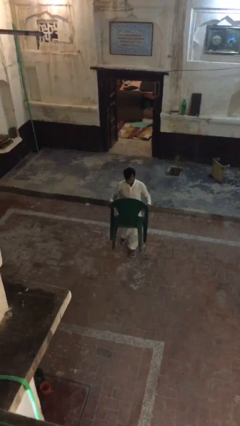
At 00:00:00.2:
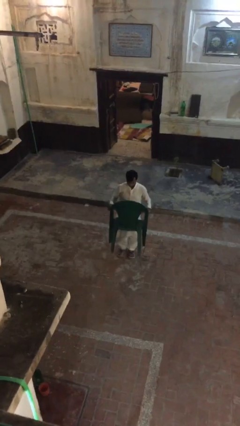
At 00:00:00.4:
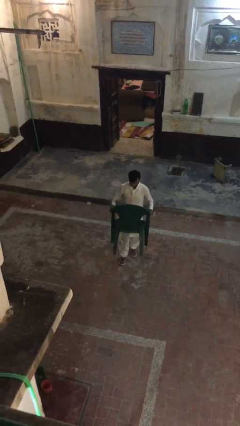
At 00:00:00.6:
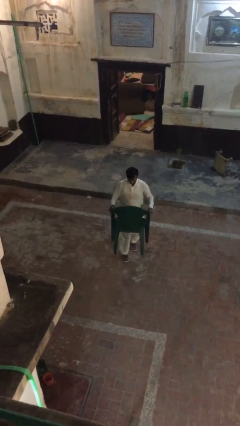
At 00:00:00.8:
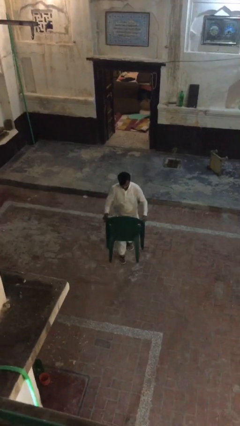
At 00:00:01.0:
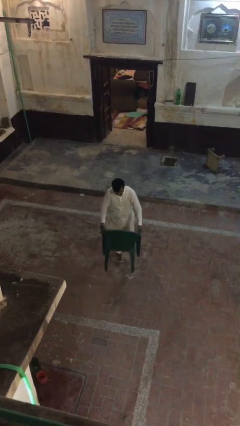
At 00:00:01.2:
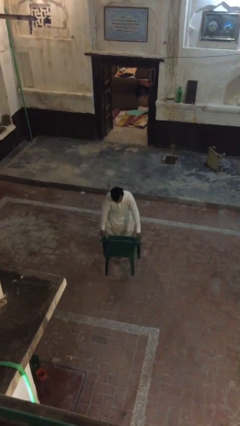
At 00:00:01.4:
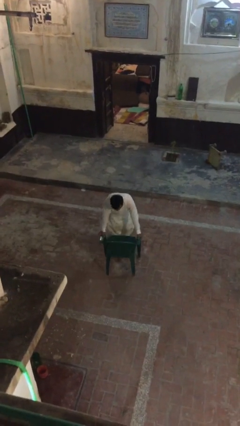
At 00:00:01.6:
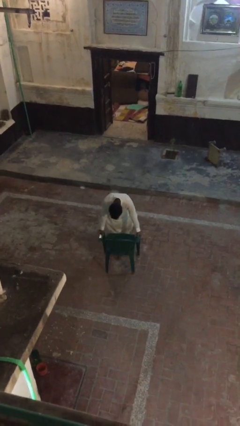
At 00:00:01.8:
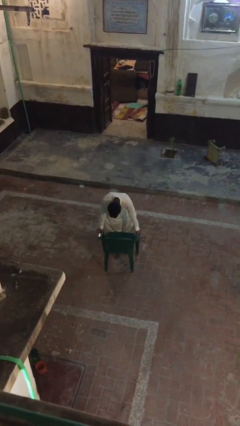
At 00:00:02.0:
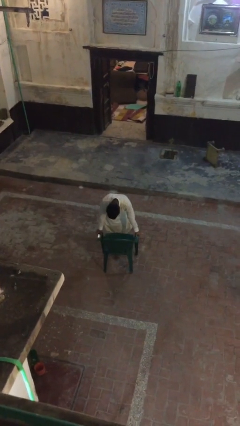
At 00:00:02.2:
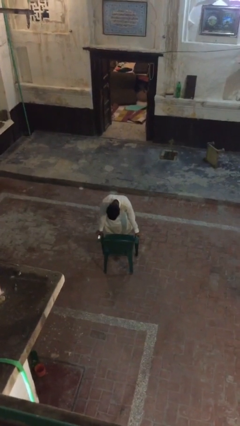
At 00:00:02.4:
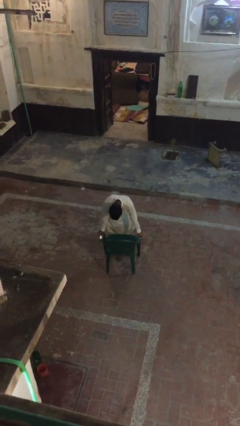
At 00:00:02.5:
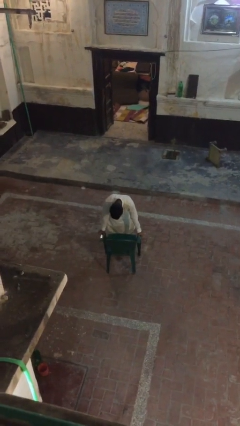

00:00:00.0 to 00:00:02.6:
person puts down object on floor

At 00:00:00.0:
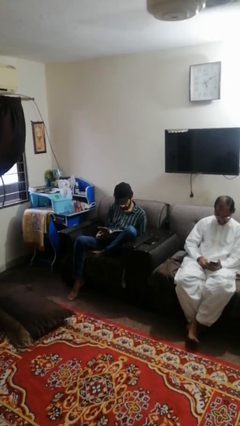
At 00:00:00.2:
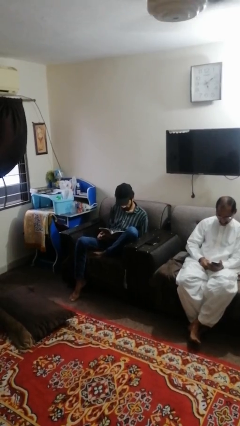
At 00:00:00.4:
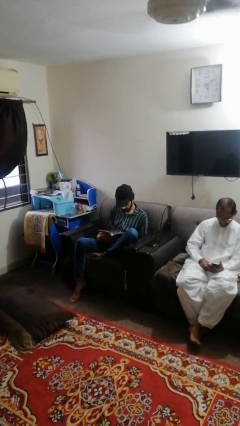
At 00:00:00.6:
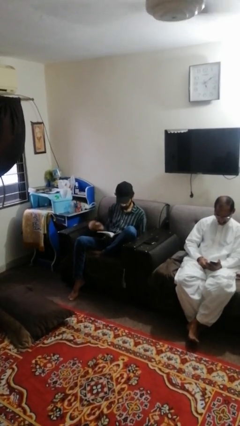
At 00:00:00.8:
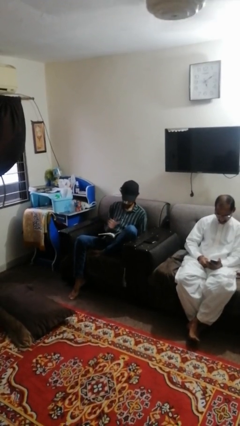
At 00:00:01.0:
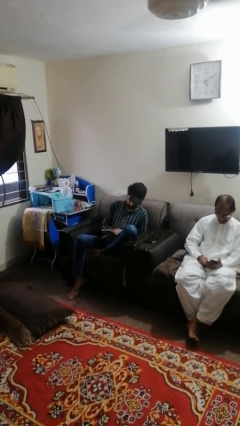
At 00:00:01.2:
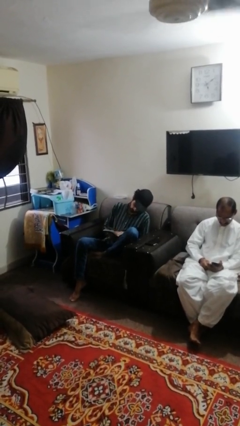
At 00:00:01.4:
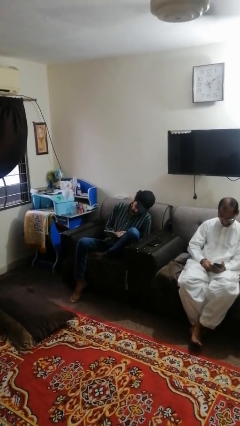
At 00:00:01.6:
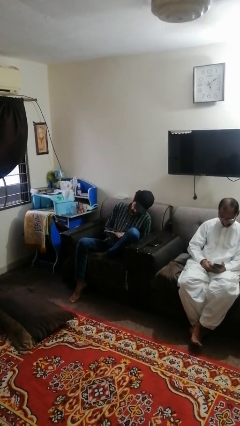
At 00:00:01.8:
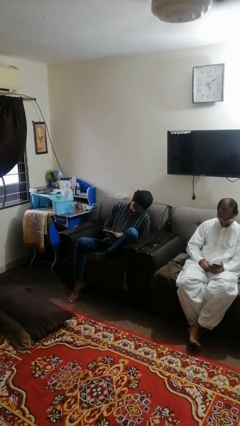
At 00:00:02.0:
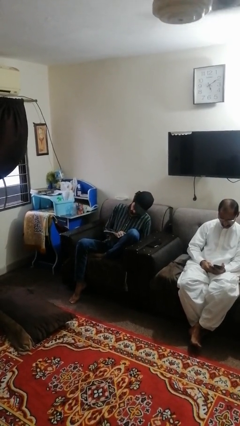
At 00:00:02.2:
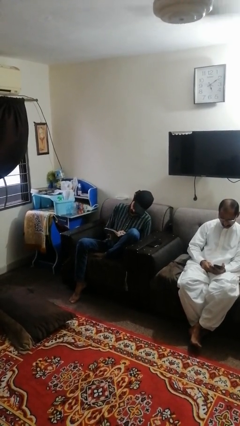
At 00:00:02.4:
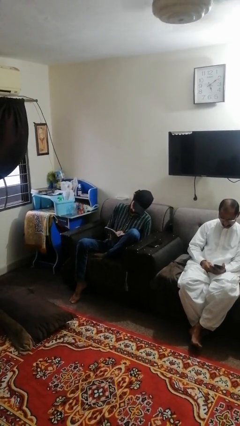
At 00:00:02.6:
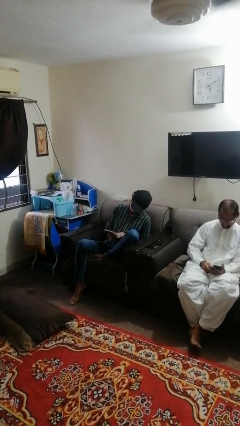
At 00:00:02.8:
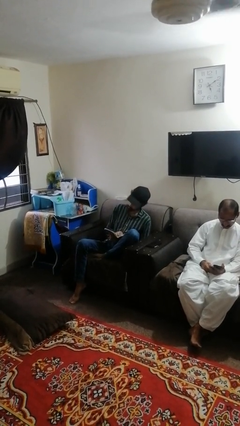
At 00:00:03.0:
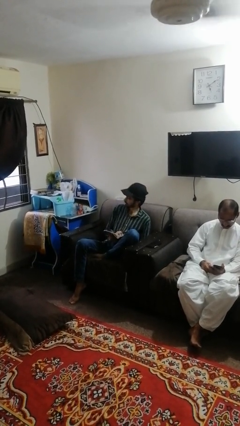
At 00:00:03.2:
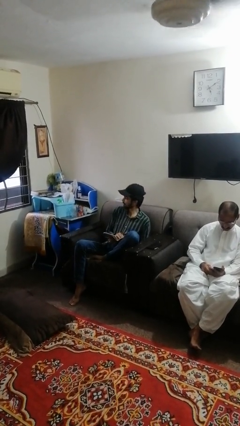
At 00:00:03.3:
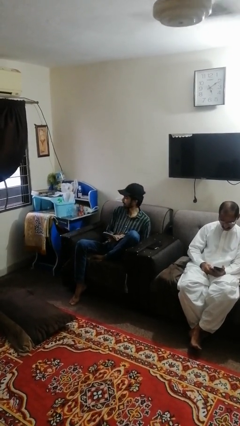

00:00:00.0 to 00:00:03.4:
person reads book

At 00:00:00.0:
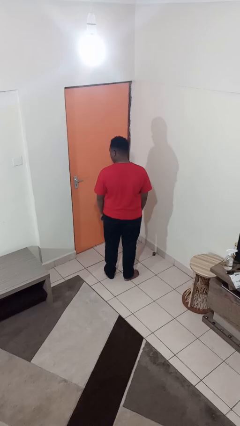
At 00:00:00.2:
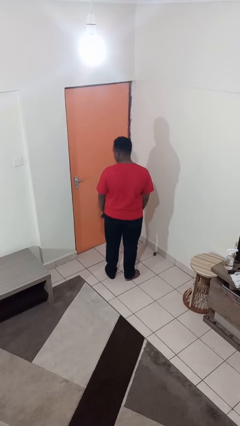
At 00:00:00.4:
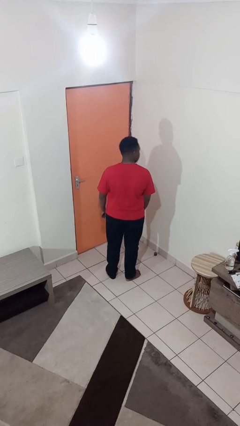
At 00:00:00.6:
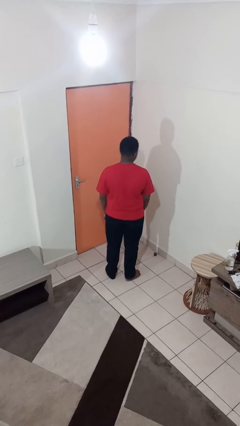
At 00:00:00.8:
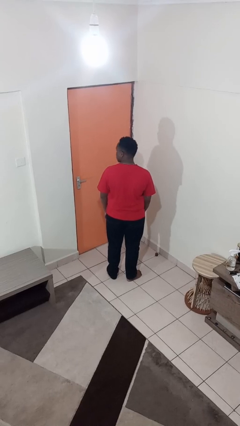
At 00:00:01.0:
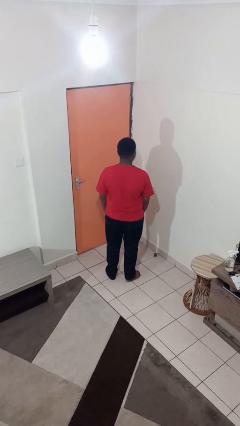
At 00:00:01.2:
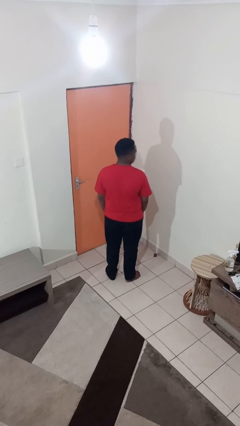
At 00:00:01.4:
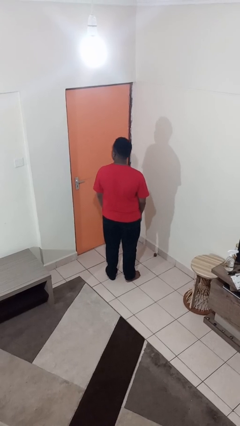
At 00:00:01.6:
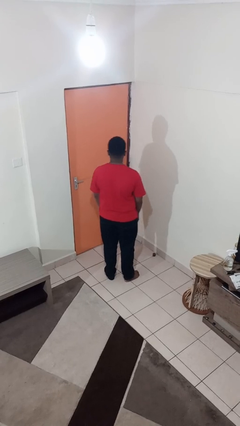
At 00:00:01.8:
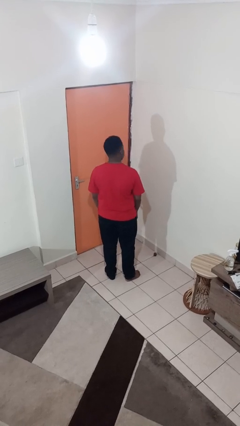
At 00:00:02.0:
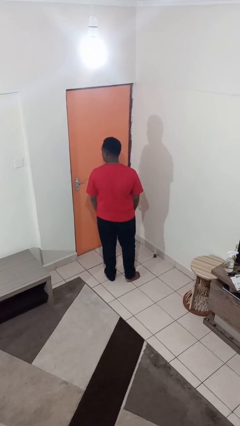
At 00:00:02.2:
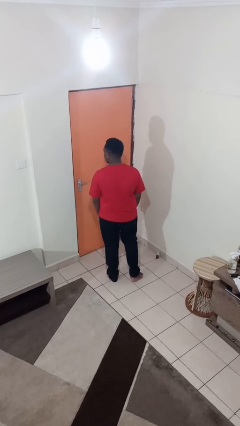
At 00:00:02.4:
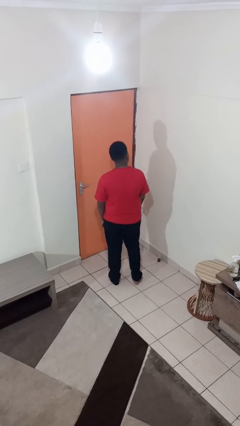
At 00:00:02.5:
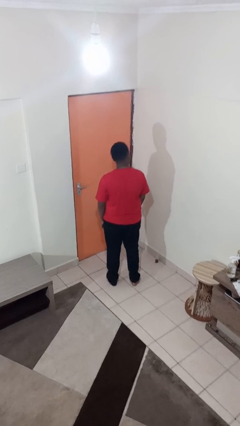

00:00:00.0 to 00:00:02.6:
person shakes head

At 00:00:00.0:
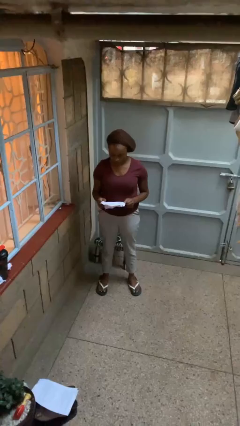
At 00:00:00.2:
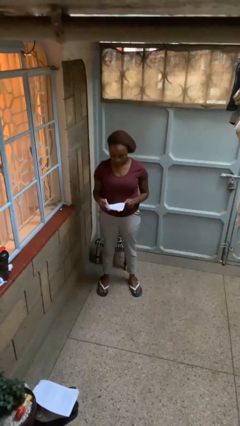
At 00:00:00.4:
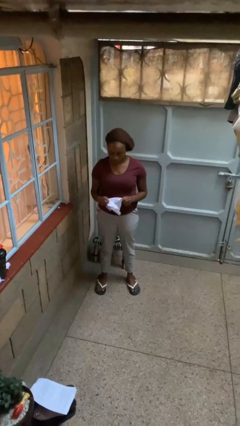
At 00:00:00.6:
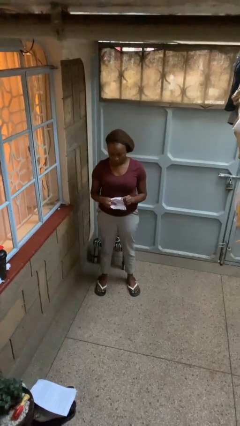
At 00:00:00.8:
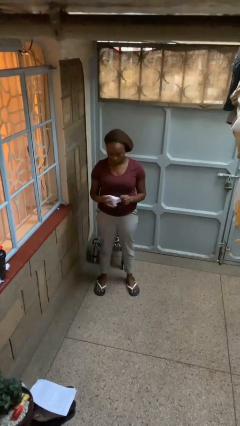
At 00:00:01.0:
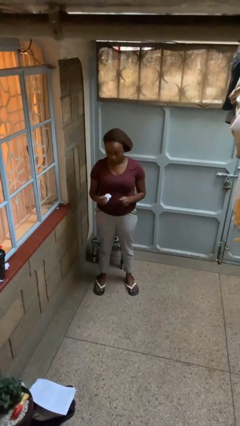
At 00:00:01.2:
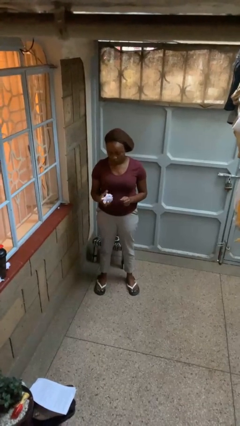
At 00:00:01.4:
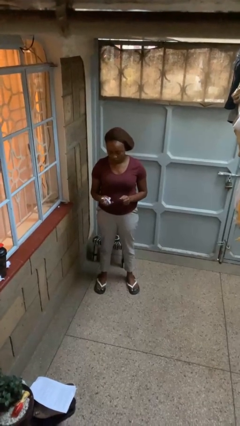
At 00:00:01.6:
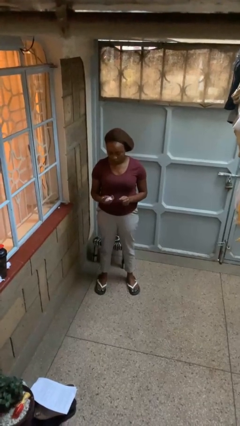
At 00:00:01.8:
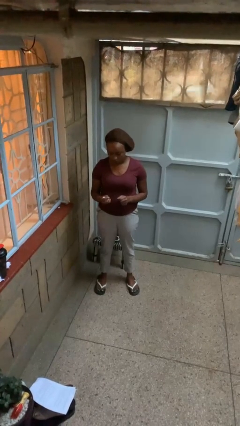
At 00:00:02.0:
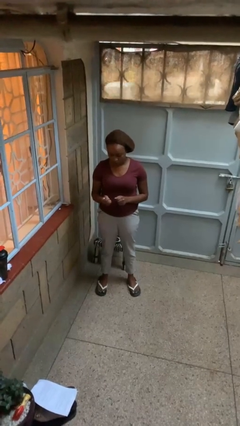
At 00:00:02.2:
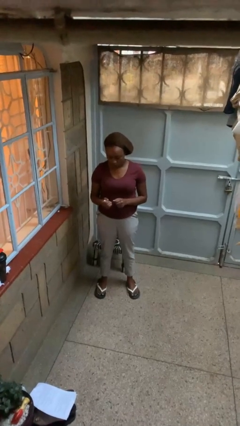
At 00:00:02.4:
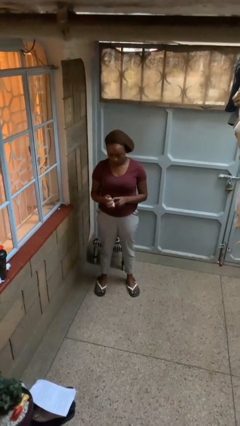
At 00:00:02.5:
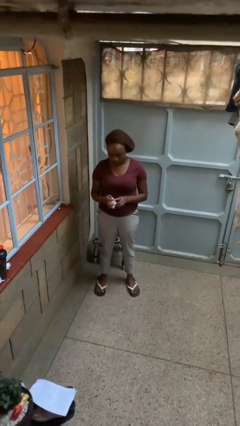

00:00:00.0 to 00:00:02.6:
person crumples paper

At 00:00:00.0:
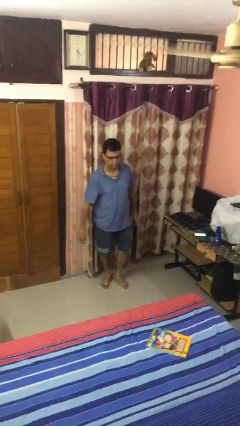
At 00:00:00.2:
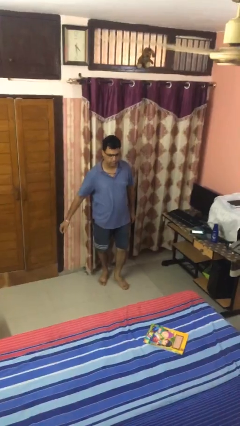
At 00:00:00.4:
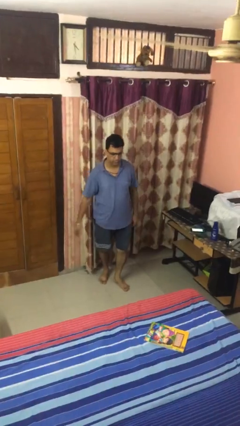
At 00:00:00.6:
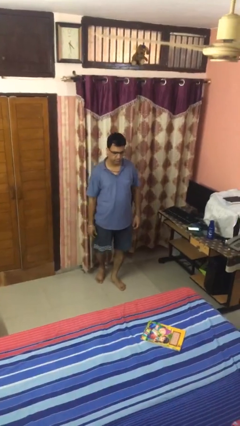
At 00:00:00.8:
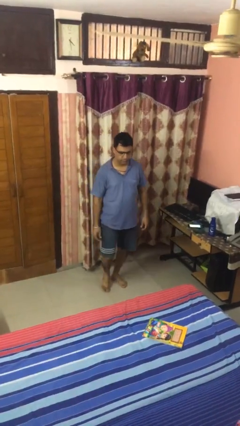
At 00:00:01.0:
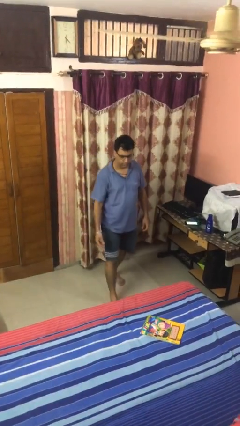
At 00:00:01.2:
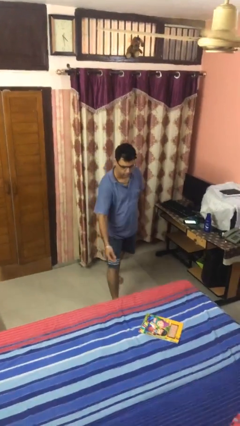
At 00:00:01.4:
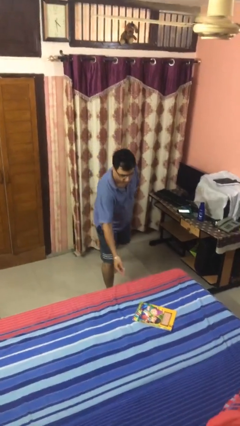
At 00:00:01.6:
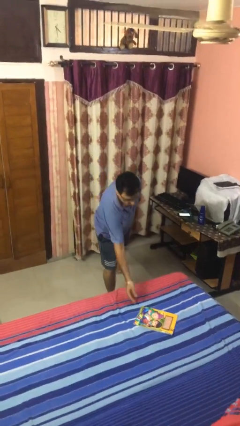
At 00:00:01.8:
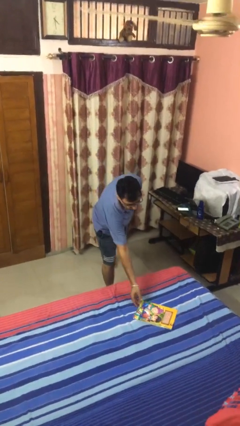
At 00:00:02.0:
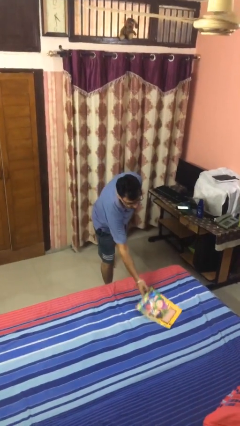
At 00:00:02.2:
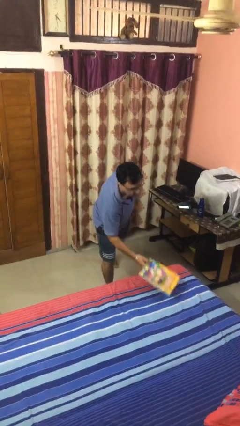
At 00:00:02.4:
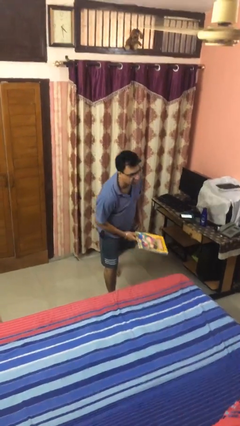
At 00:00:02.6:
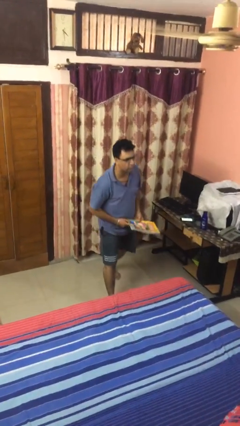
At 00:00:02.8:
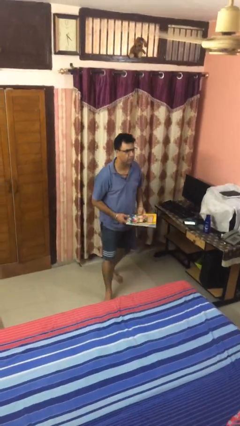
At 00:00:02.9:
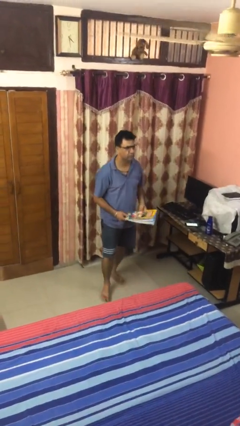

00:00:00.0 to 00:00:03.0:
person picks up object from bed

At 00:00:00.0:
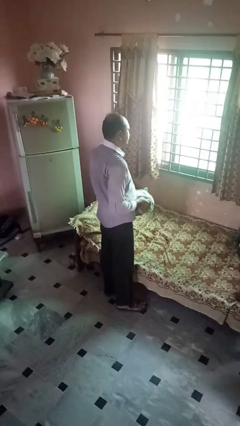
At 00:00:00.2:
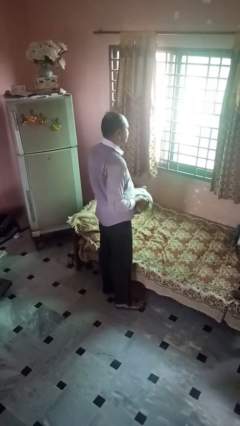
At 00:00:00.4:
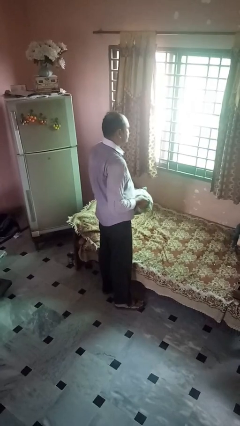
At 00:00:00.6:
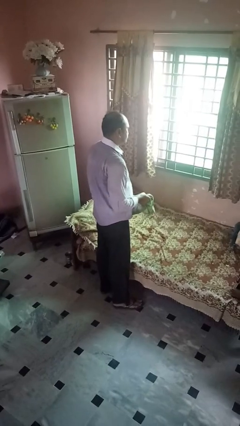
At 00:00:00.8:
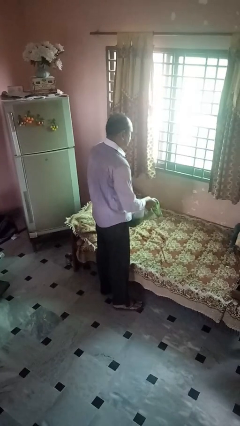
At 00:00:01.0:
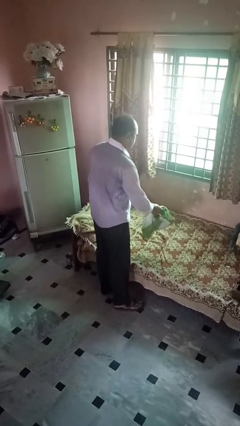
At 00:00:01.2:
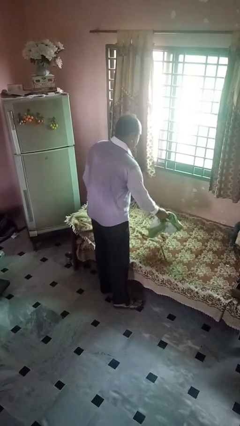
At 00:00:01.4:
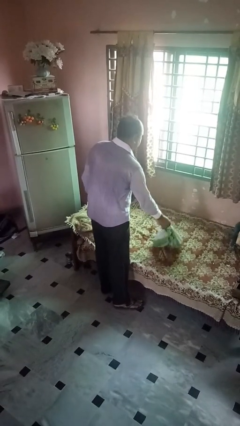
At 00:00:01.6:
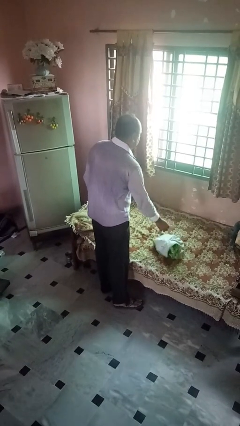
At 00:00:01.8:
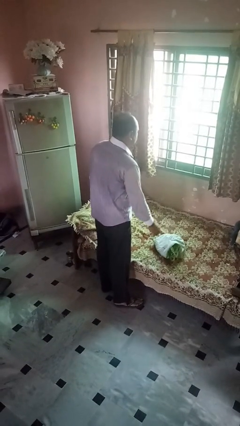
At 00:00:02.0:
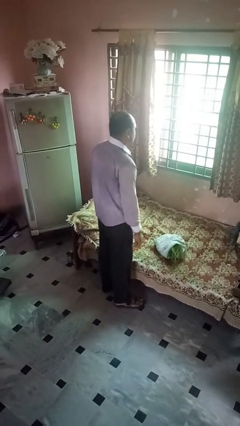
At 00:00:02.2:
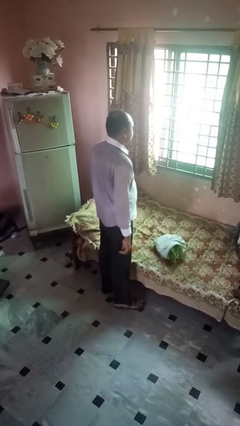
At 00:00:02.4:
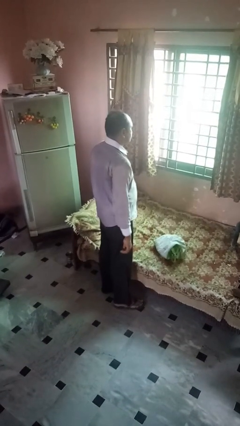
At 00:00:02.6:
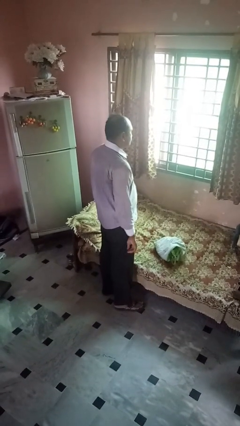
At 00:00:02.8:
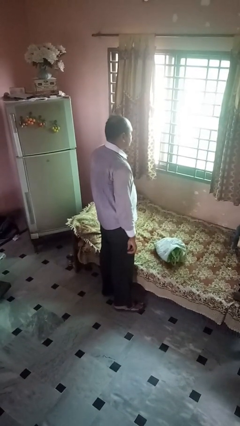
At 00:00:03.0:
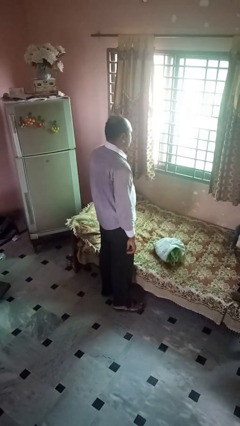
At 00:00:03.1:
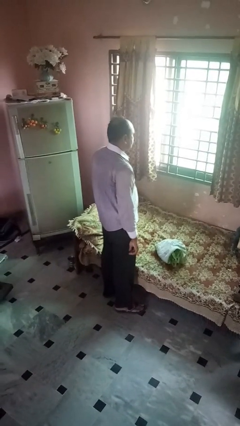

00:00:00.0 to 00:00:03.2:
person puts down object on bed
